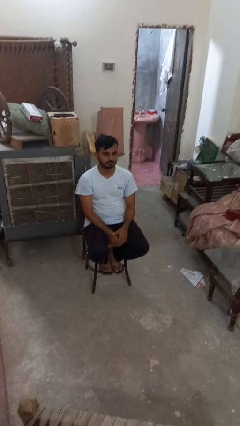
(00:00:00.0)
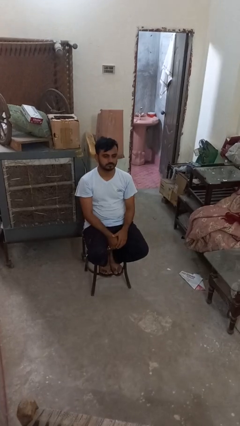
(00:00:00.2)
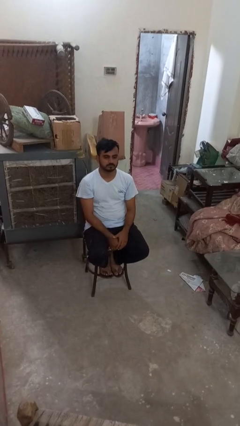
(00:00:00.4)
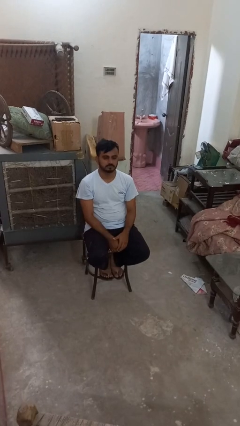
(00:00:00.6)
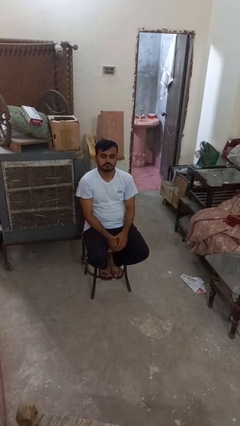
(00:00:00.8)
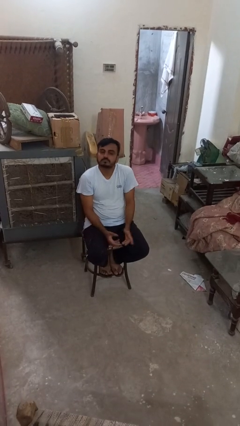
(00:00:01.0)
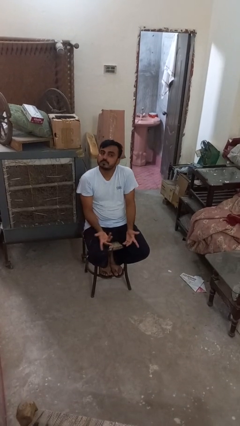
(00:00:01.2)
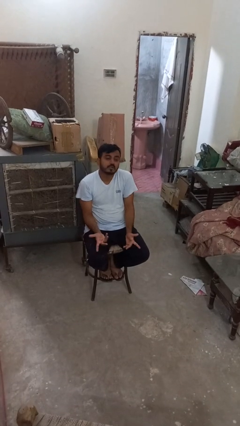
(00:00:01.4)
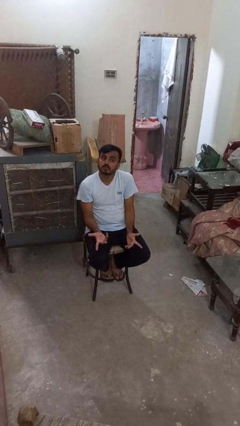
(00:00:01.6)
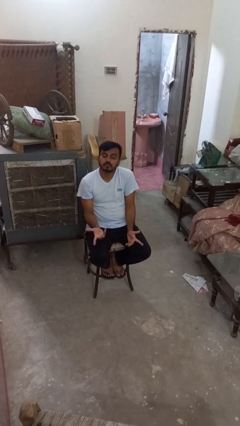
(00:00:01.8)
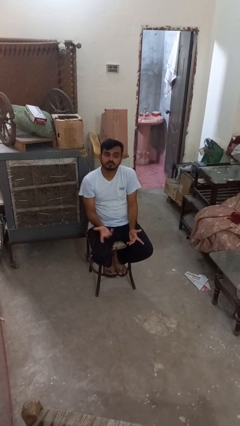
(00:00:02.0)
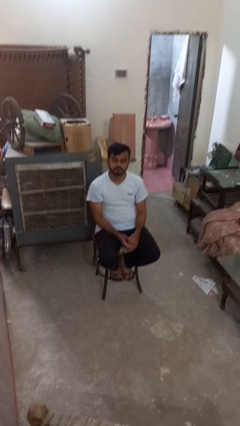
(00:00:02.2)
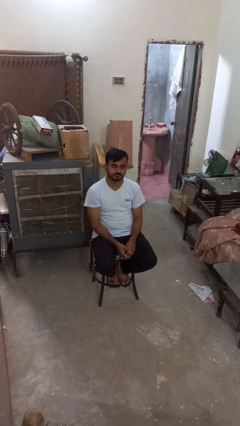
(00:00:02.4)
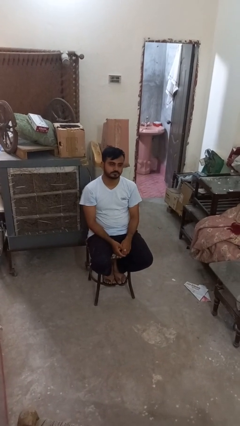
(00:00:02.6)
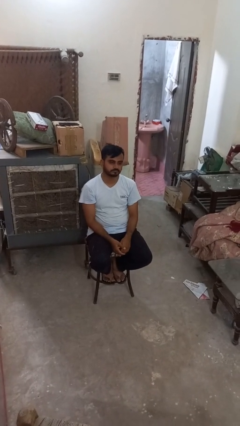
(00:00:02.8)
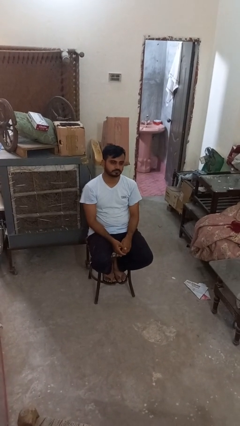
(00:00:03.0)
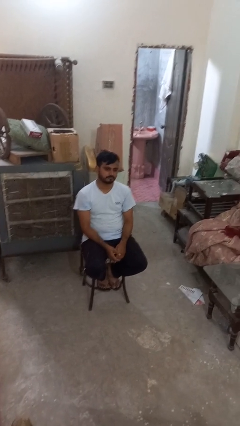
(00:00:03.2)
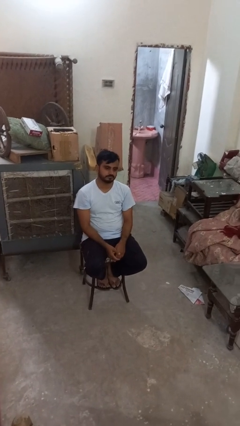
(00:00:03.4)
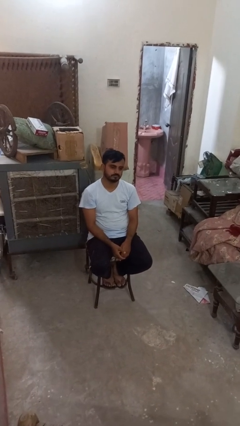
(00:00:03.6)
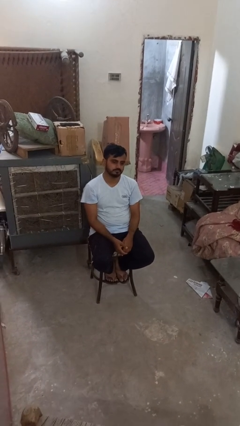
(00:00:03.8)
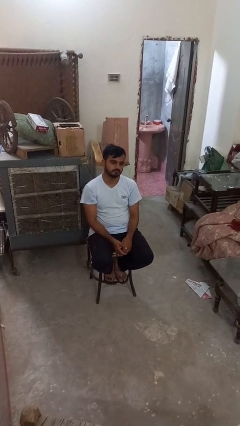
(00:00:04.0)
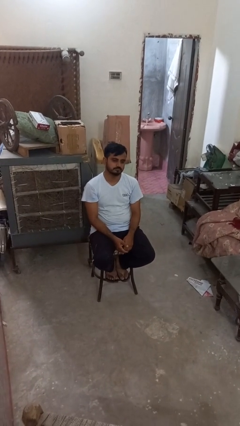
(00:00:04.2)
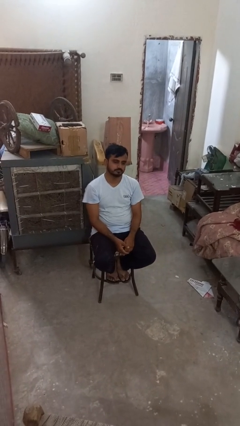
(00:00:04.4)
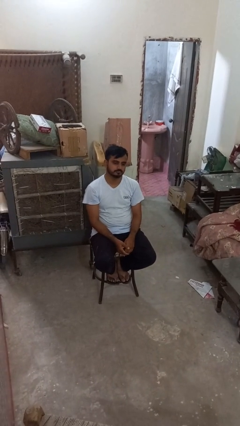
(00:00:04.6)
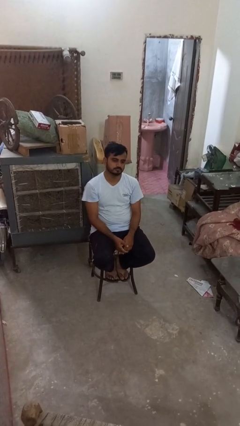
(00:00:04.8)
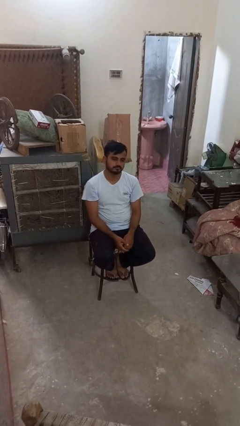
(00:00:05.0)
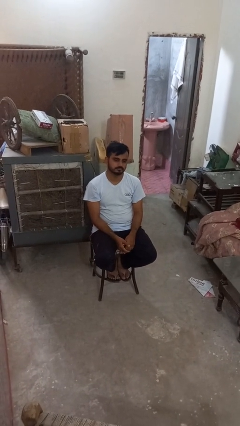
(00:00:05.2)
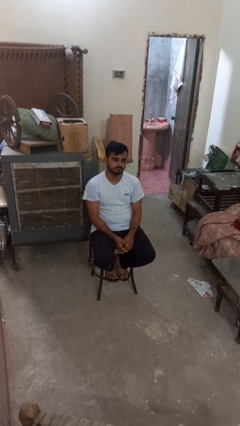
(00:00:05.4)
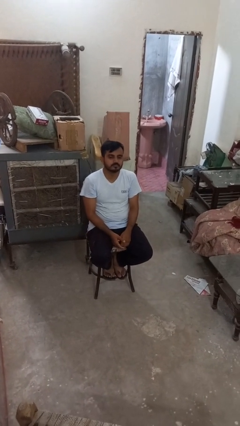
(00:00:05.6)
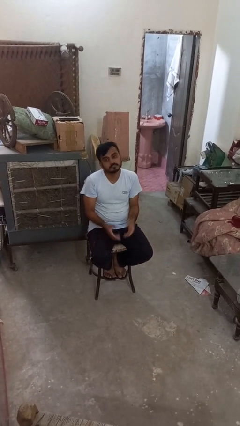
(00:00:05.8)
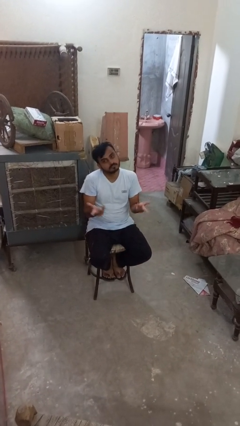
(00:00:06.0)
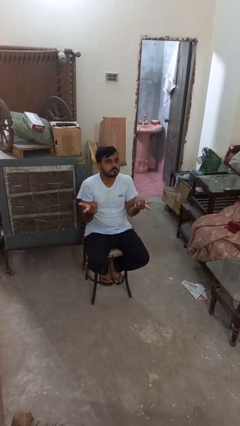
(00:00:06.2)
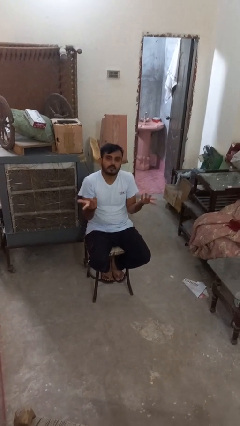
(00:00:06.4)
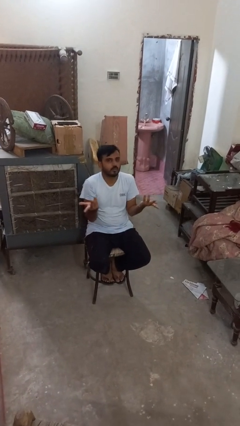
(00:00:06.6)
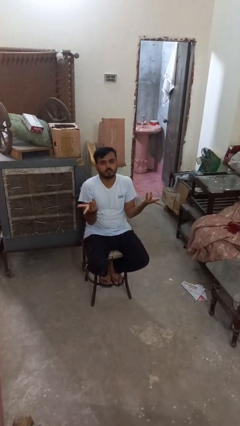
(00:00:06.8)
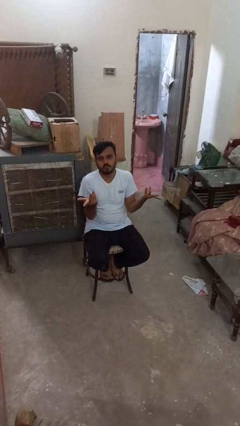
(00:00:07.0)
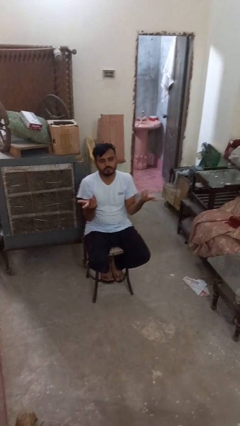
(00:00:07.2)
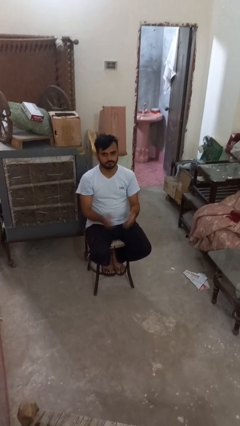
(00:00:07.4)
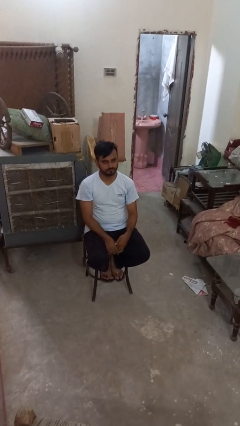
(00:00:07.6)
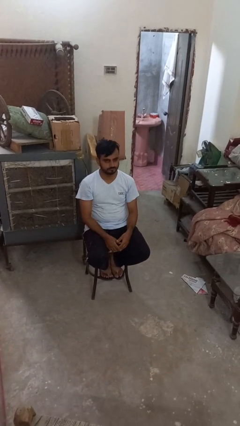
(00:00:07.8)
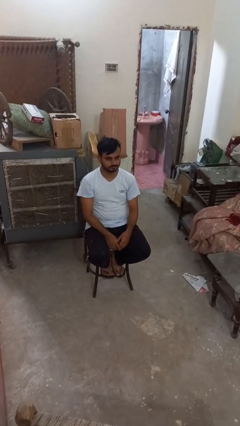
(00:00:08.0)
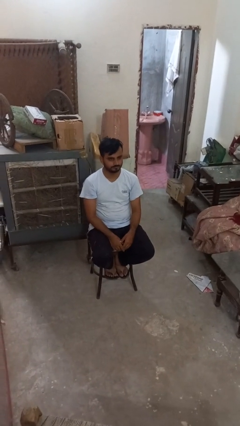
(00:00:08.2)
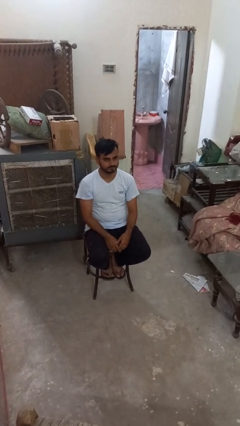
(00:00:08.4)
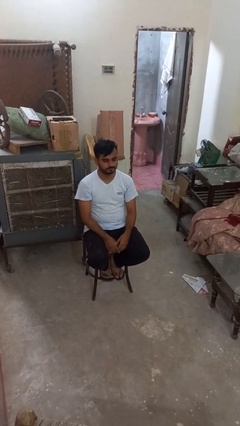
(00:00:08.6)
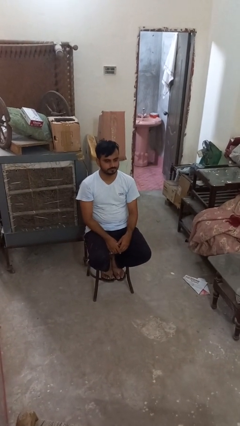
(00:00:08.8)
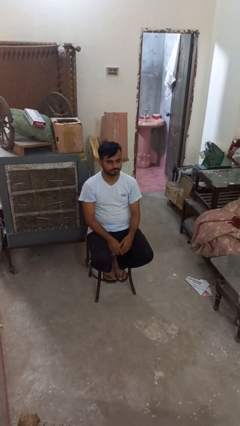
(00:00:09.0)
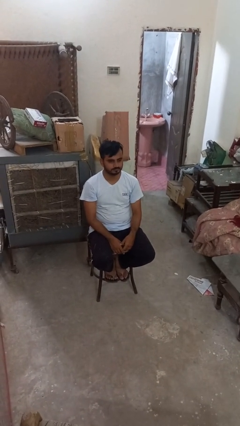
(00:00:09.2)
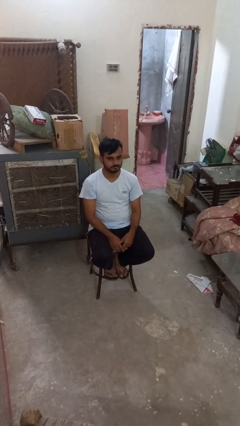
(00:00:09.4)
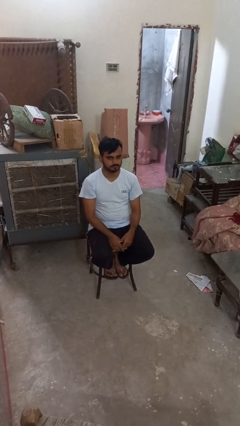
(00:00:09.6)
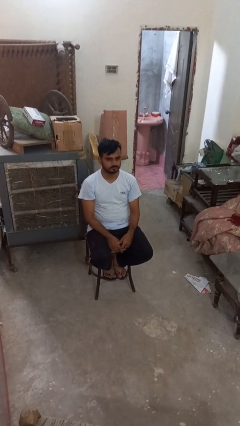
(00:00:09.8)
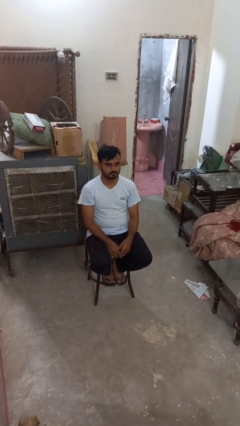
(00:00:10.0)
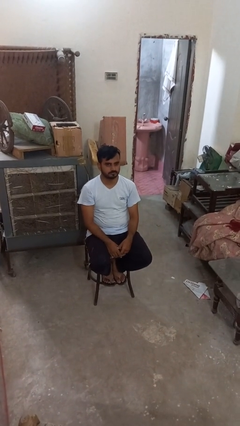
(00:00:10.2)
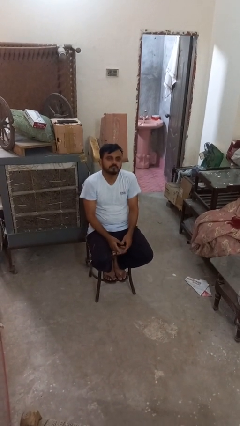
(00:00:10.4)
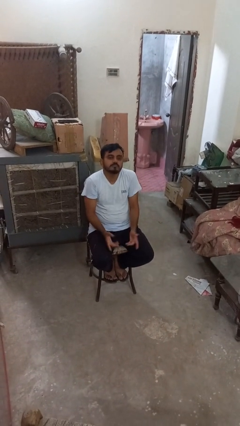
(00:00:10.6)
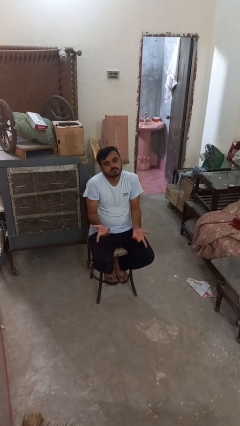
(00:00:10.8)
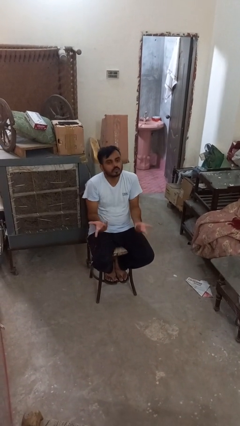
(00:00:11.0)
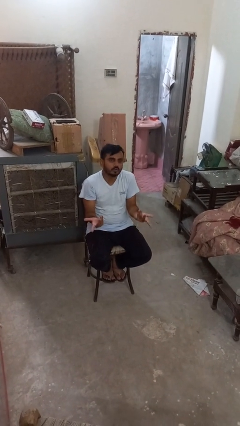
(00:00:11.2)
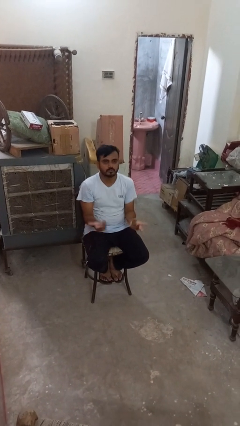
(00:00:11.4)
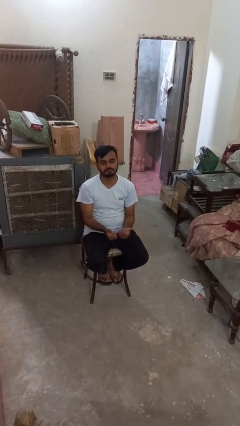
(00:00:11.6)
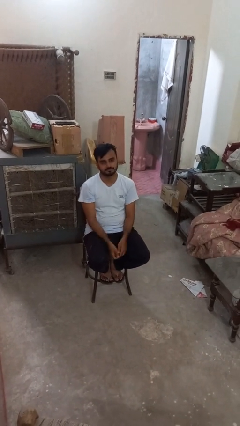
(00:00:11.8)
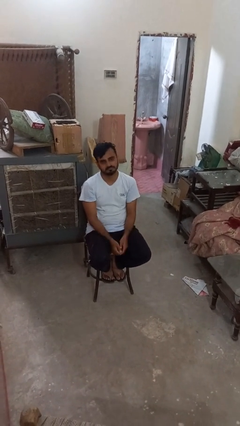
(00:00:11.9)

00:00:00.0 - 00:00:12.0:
person shrugs

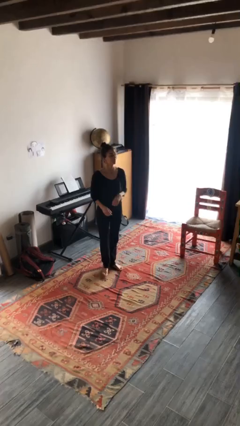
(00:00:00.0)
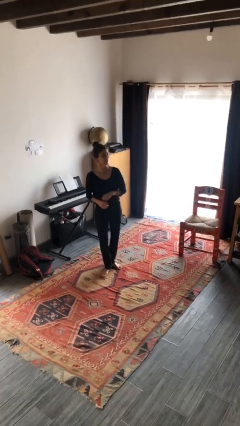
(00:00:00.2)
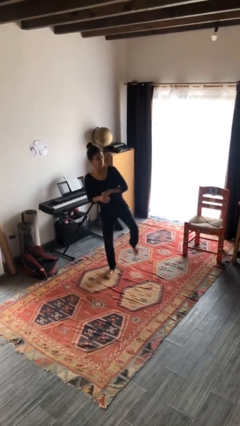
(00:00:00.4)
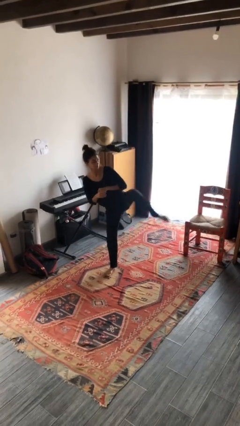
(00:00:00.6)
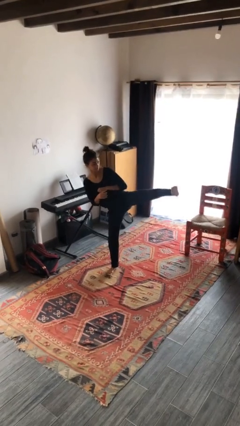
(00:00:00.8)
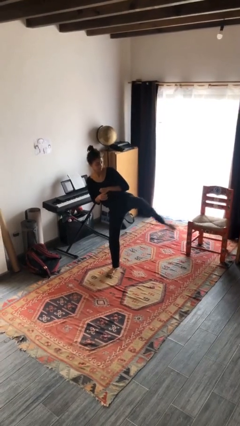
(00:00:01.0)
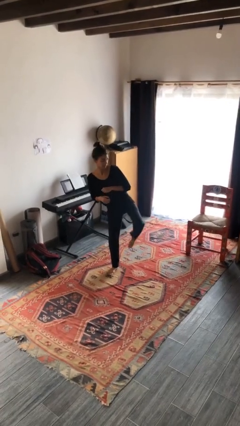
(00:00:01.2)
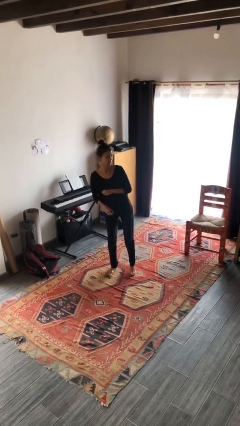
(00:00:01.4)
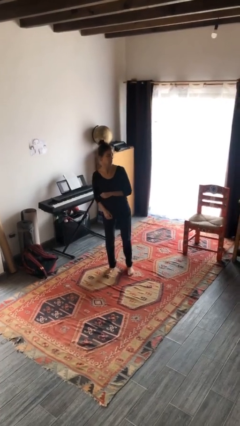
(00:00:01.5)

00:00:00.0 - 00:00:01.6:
person karate kicks

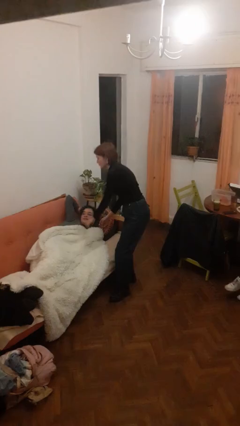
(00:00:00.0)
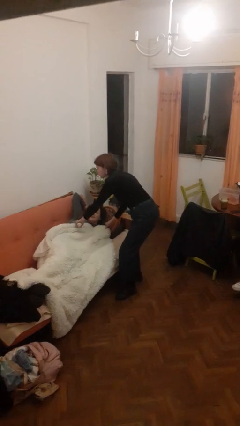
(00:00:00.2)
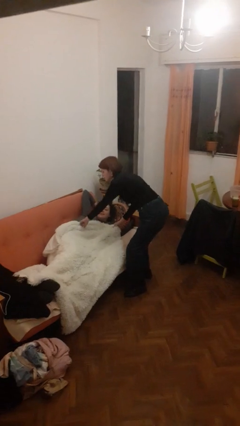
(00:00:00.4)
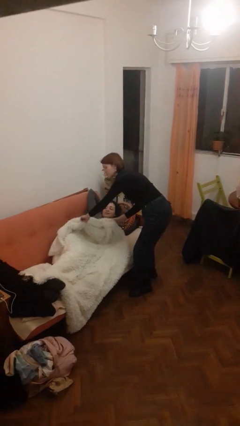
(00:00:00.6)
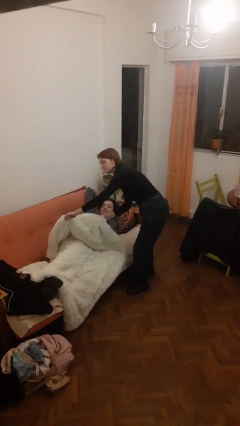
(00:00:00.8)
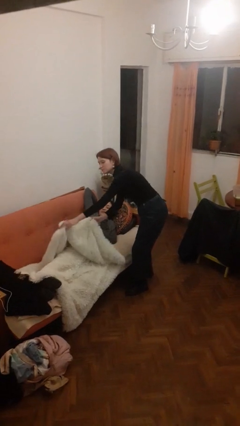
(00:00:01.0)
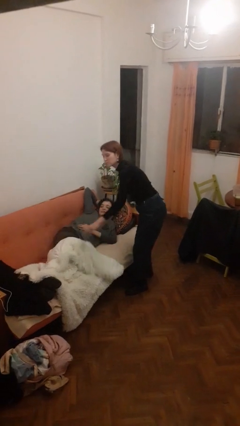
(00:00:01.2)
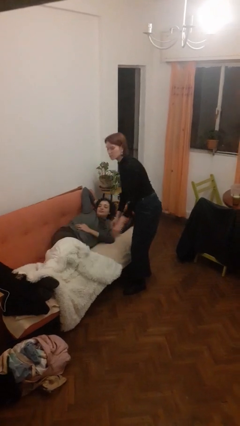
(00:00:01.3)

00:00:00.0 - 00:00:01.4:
person uncovers friend with blanket

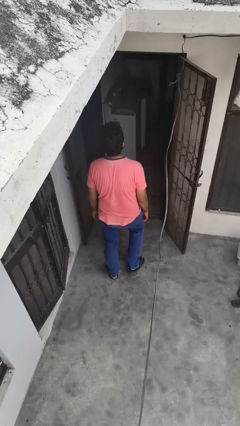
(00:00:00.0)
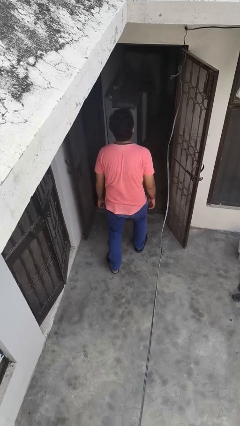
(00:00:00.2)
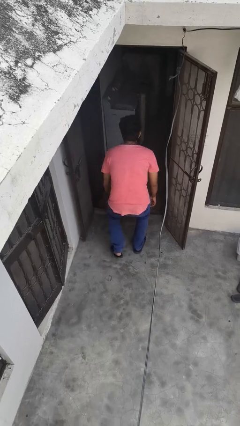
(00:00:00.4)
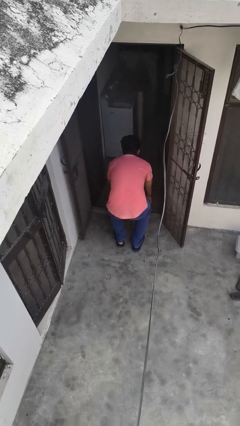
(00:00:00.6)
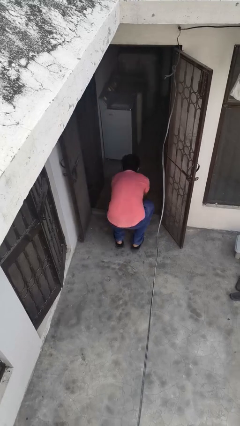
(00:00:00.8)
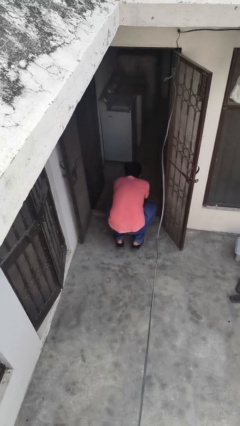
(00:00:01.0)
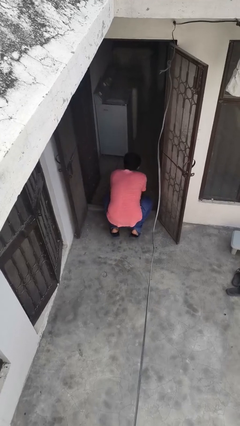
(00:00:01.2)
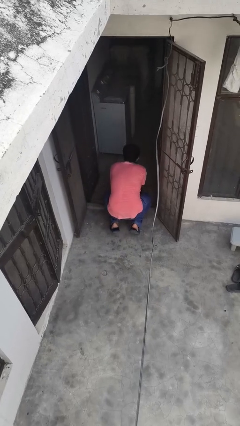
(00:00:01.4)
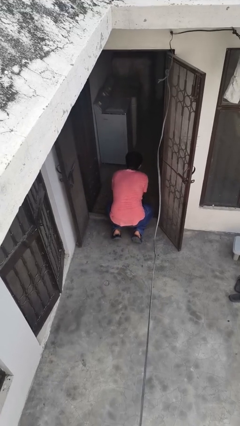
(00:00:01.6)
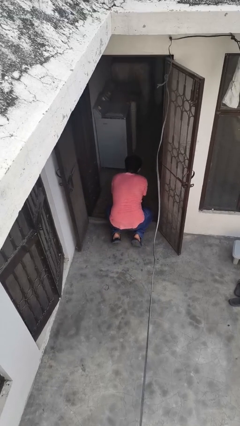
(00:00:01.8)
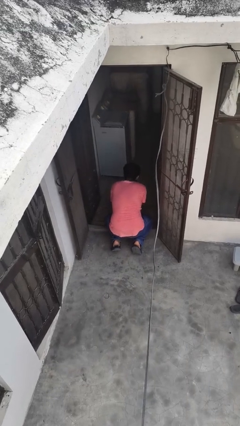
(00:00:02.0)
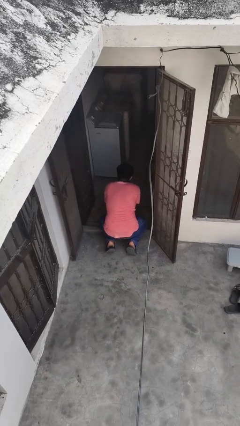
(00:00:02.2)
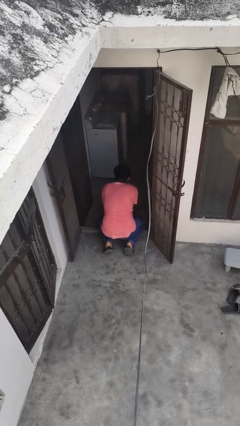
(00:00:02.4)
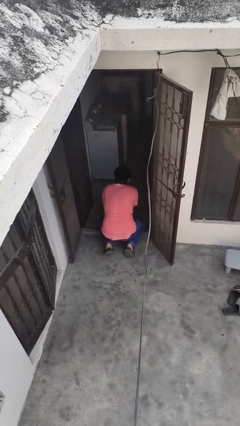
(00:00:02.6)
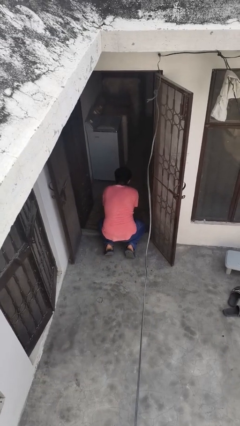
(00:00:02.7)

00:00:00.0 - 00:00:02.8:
person trips on object on floor
